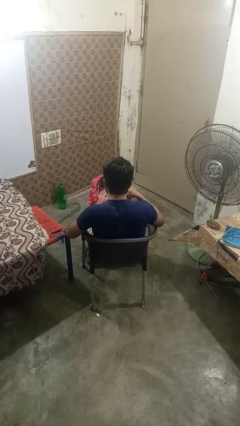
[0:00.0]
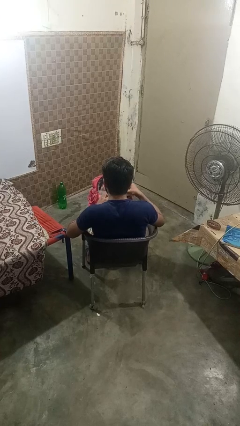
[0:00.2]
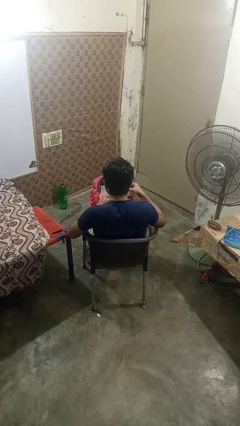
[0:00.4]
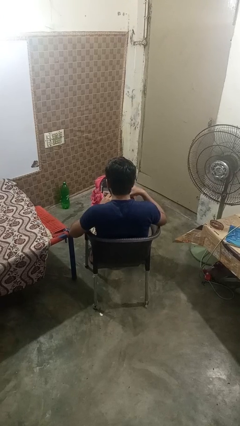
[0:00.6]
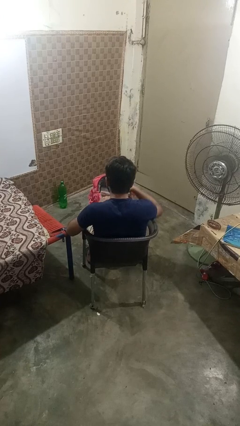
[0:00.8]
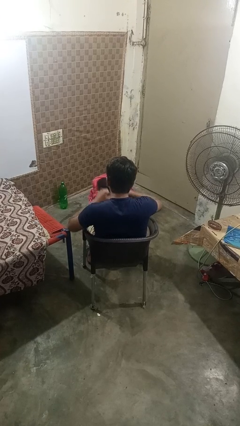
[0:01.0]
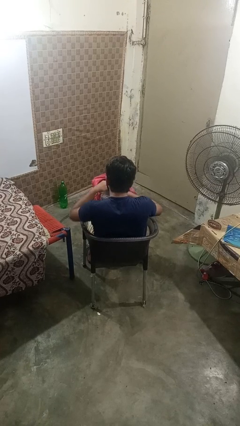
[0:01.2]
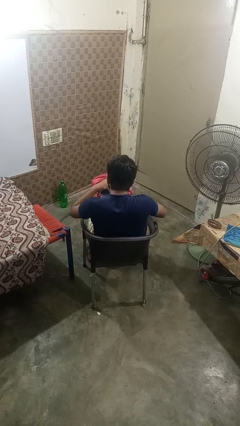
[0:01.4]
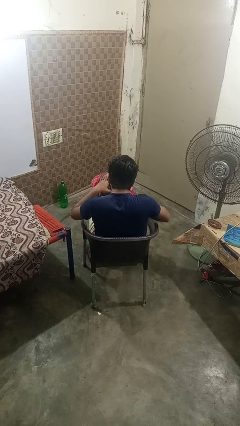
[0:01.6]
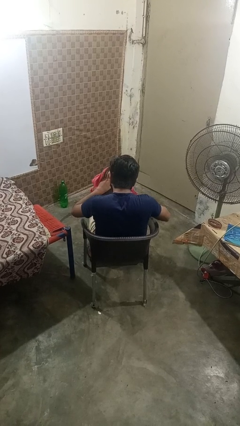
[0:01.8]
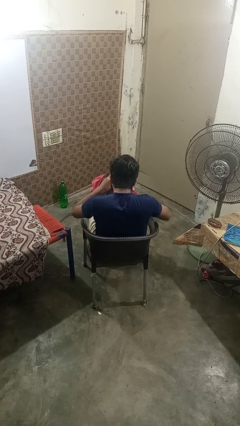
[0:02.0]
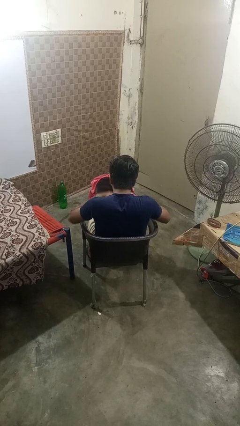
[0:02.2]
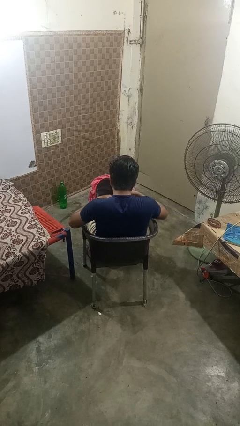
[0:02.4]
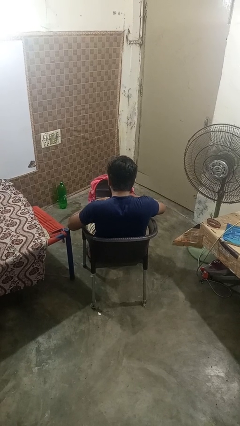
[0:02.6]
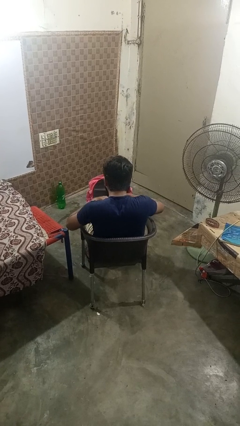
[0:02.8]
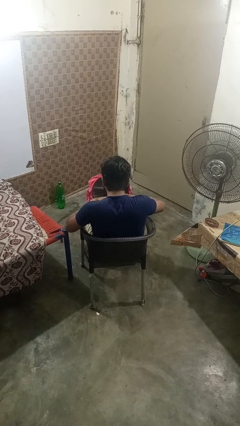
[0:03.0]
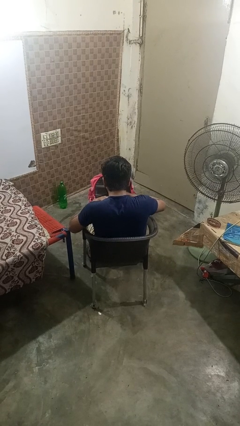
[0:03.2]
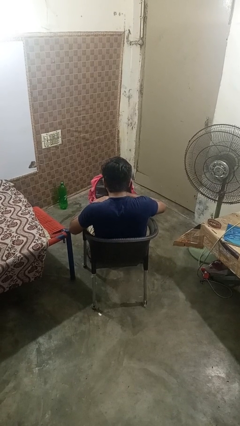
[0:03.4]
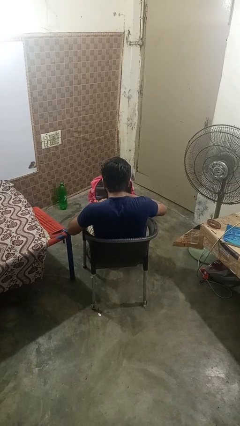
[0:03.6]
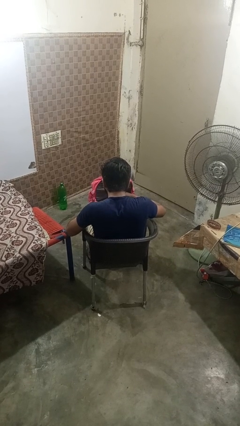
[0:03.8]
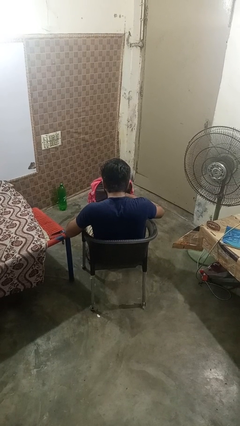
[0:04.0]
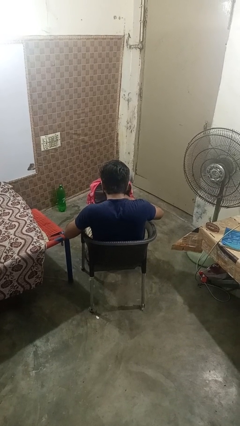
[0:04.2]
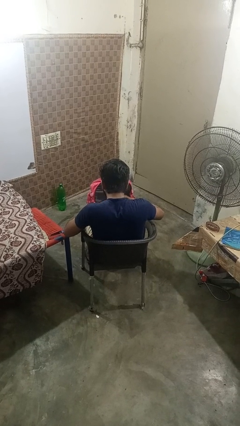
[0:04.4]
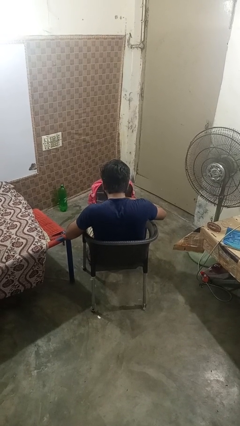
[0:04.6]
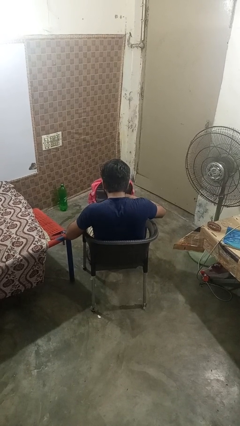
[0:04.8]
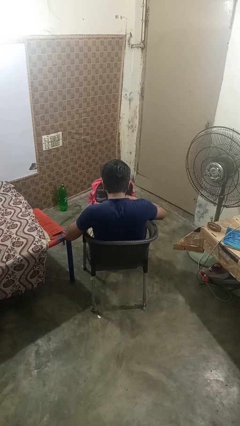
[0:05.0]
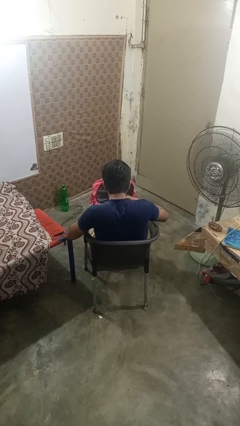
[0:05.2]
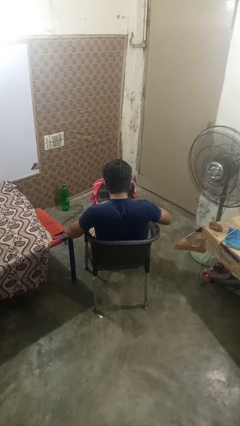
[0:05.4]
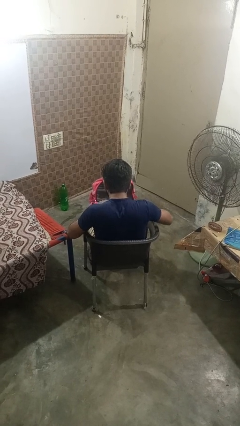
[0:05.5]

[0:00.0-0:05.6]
person searches in backpack

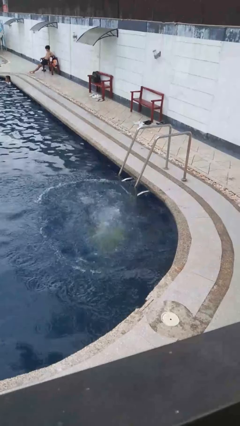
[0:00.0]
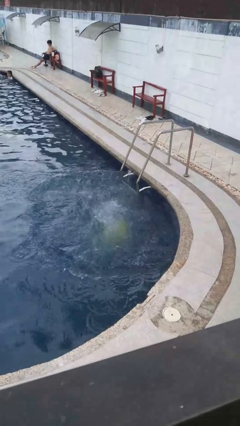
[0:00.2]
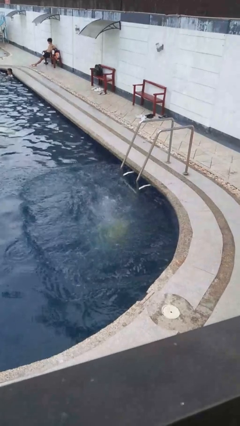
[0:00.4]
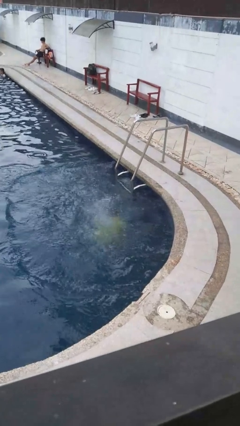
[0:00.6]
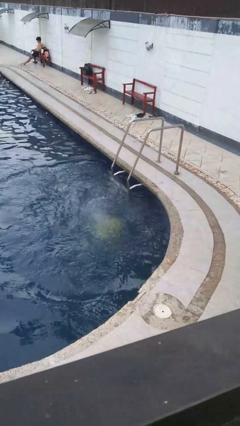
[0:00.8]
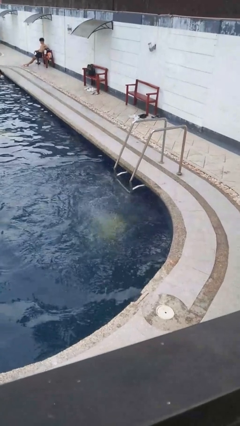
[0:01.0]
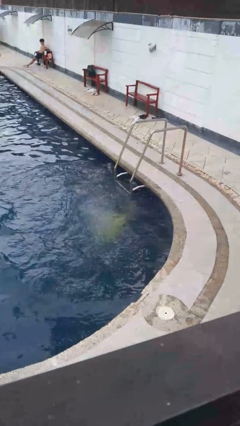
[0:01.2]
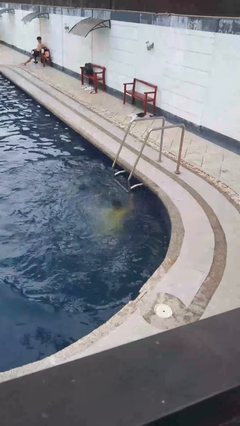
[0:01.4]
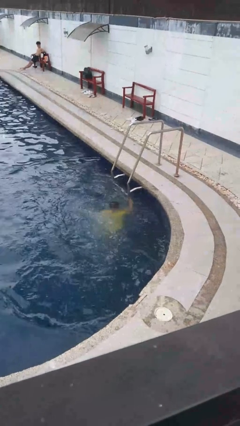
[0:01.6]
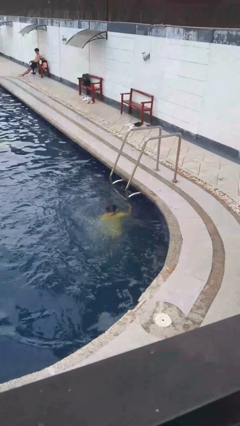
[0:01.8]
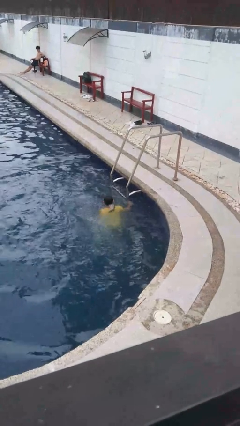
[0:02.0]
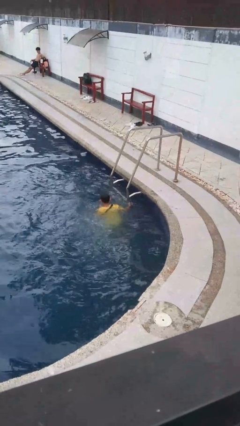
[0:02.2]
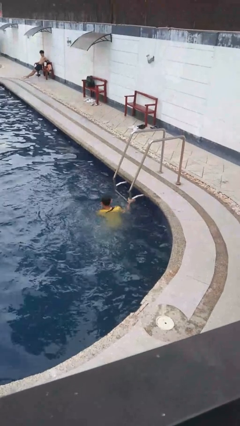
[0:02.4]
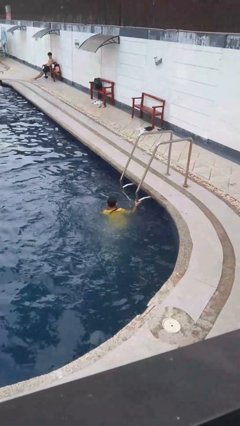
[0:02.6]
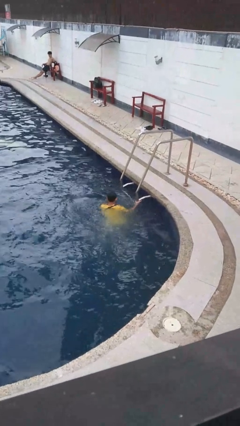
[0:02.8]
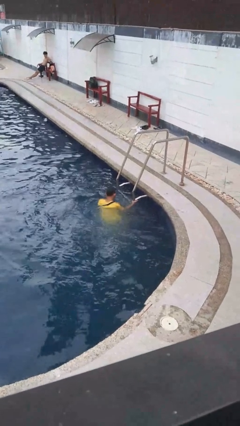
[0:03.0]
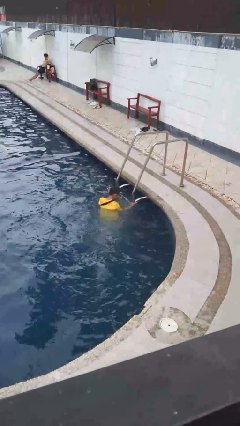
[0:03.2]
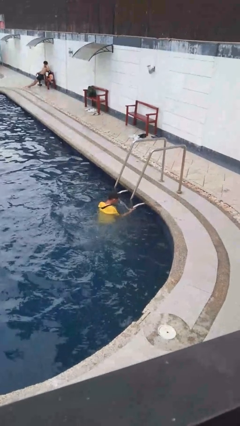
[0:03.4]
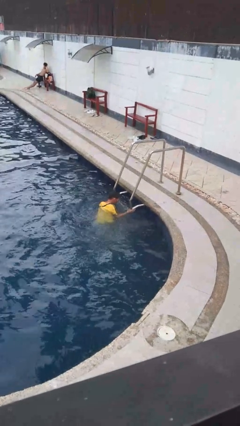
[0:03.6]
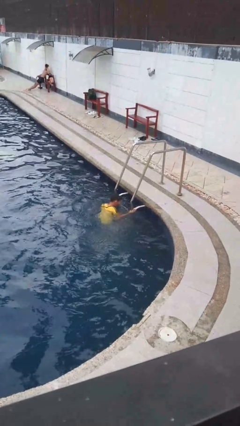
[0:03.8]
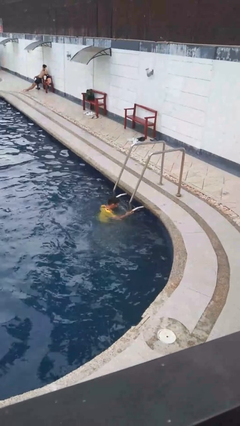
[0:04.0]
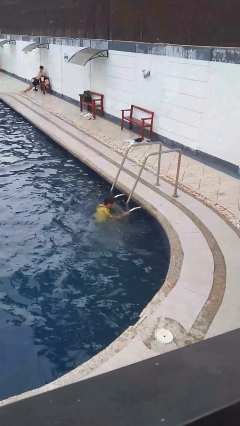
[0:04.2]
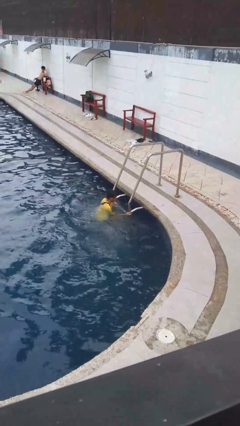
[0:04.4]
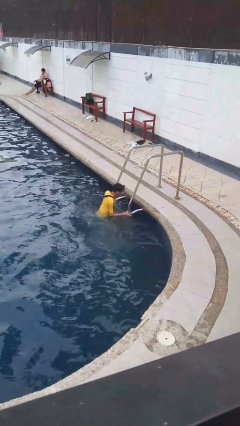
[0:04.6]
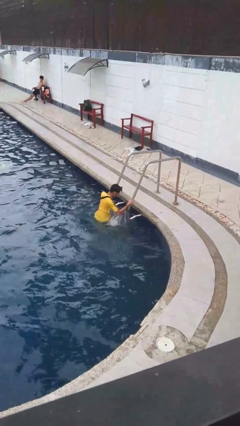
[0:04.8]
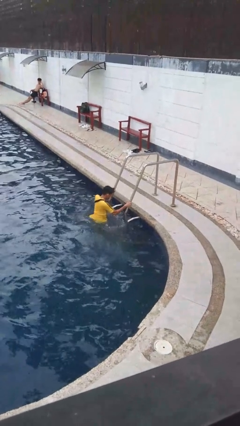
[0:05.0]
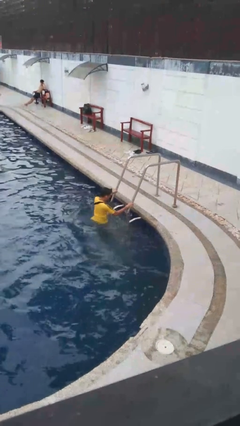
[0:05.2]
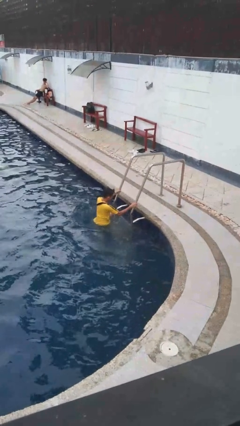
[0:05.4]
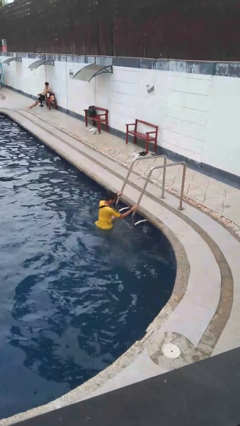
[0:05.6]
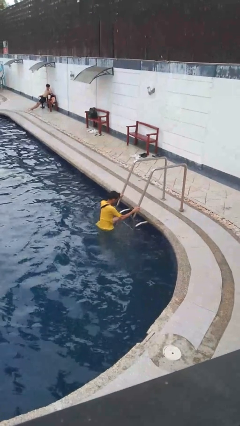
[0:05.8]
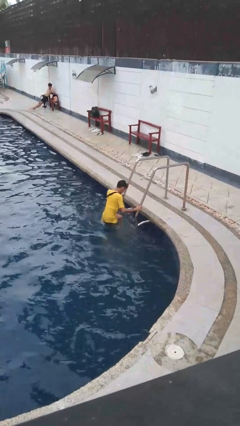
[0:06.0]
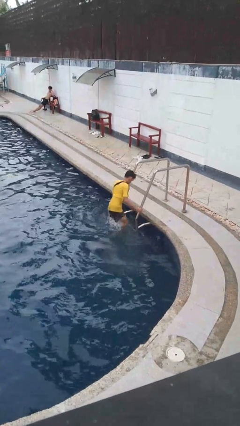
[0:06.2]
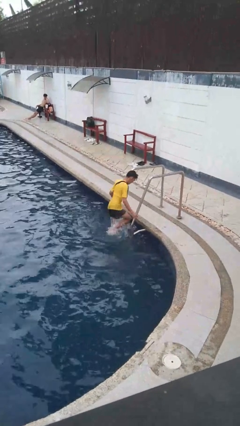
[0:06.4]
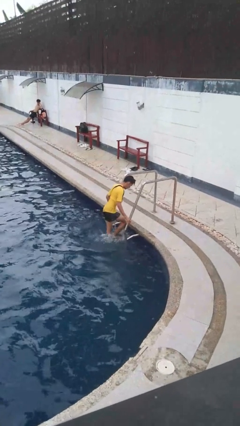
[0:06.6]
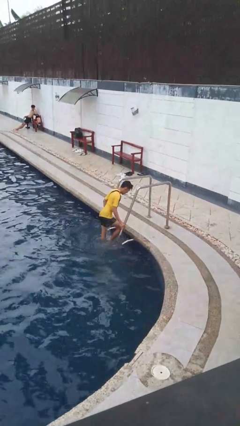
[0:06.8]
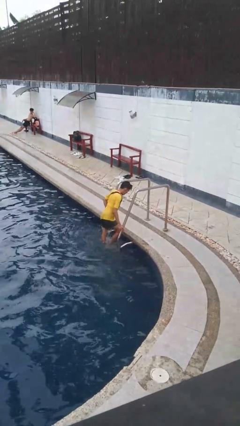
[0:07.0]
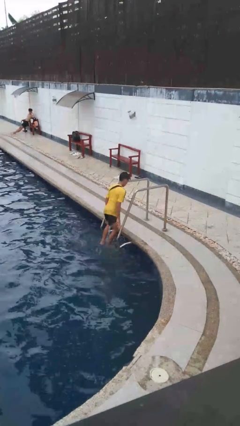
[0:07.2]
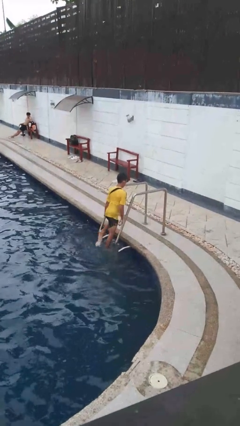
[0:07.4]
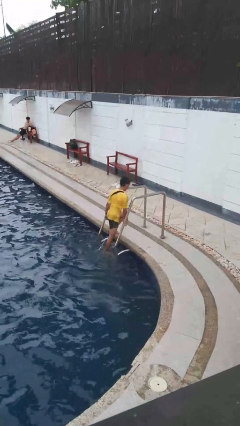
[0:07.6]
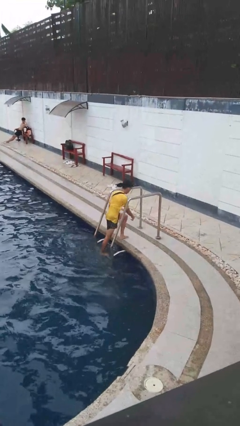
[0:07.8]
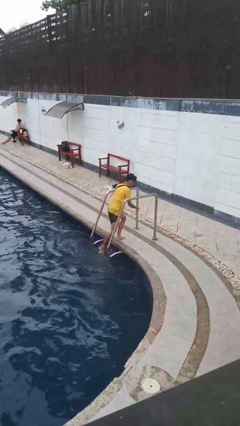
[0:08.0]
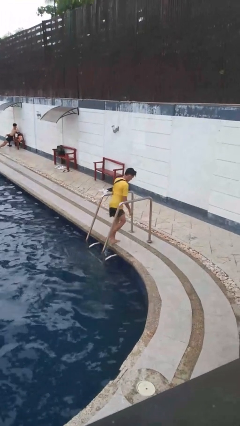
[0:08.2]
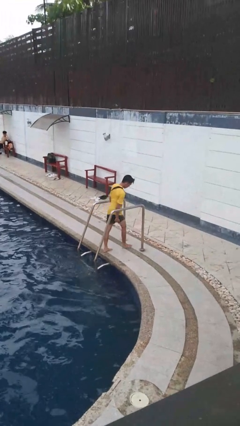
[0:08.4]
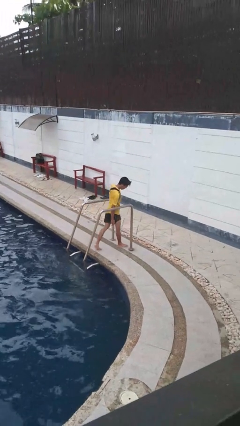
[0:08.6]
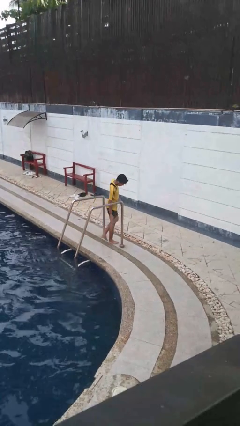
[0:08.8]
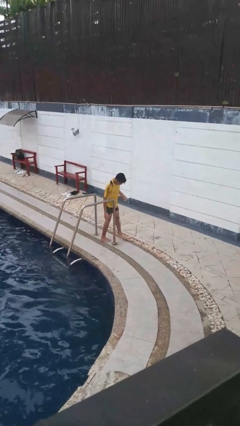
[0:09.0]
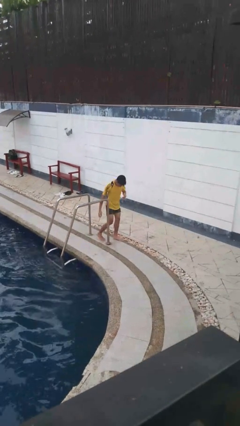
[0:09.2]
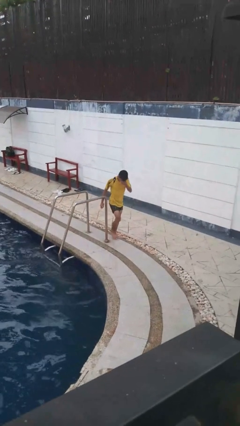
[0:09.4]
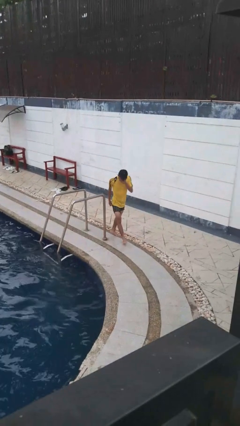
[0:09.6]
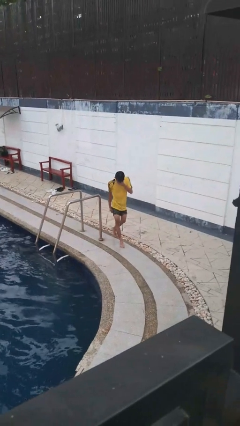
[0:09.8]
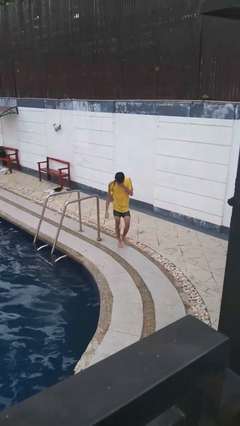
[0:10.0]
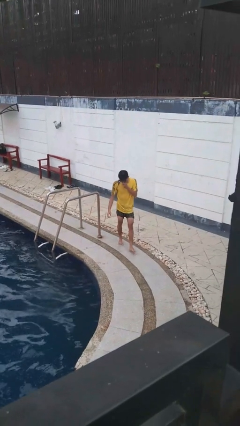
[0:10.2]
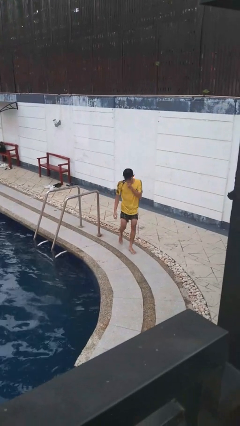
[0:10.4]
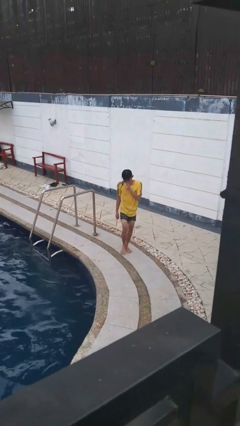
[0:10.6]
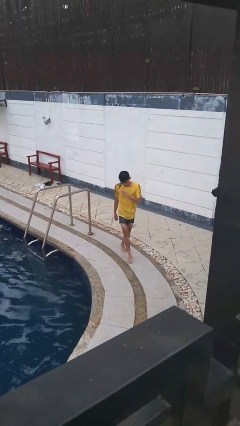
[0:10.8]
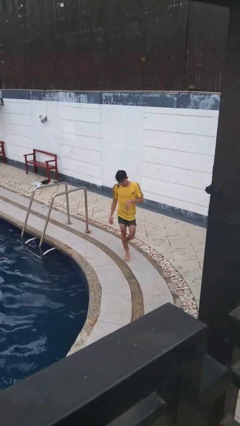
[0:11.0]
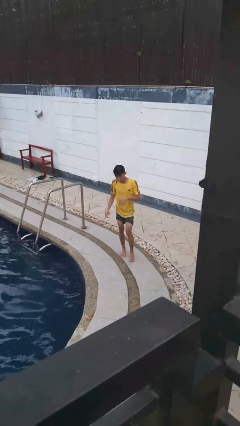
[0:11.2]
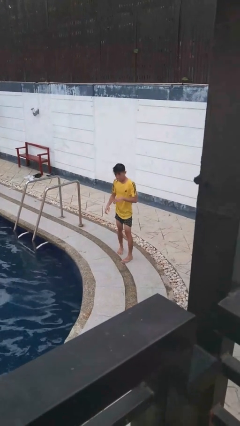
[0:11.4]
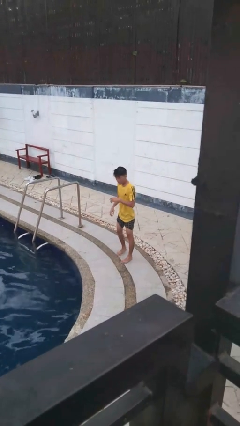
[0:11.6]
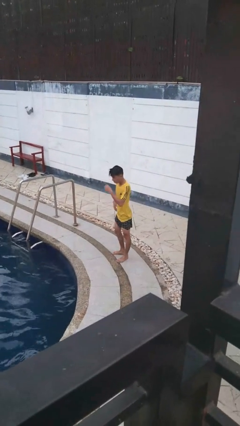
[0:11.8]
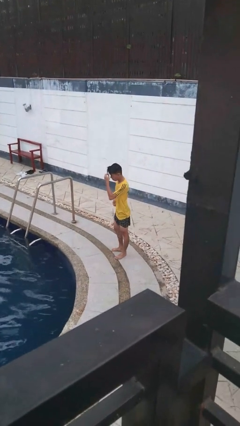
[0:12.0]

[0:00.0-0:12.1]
person exits pool
